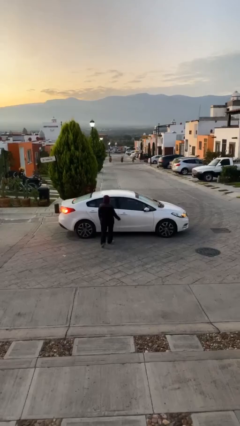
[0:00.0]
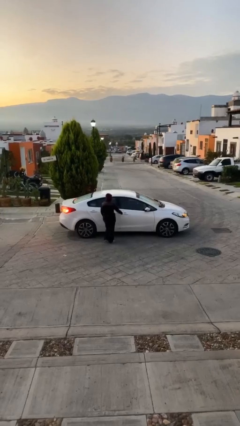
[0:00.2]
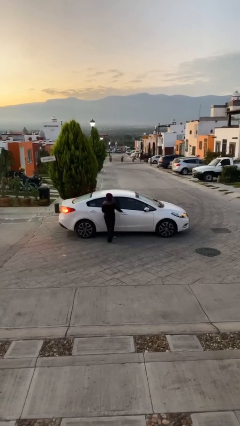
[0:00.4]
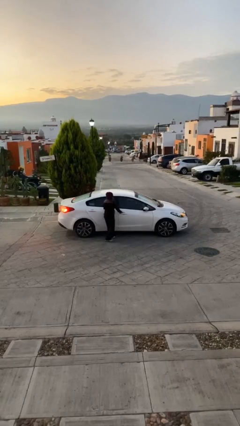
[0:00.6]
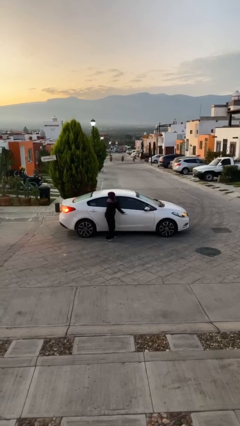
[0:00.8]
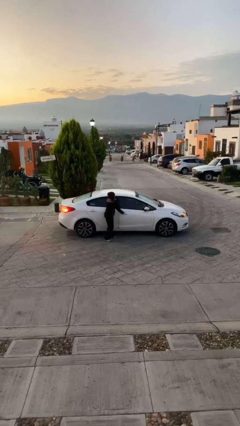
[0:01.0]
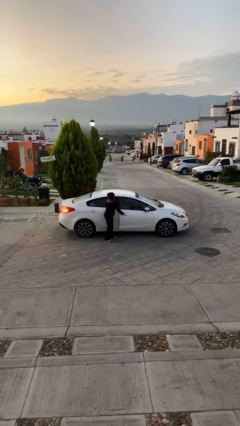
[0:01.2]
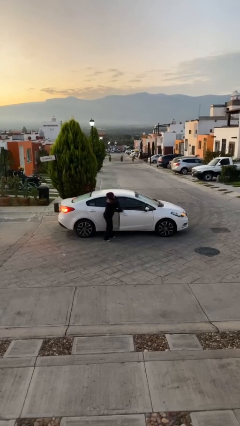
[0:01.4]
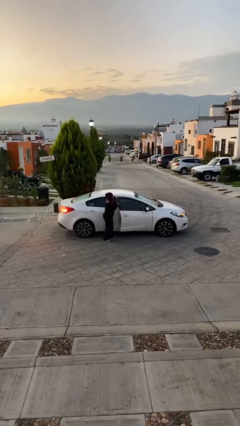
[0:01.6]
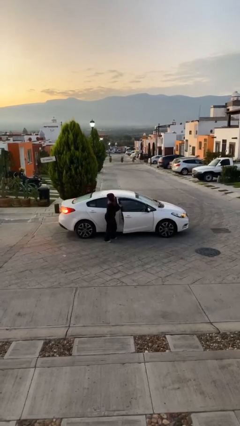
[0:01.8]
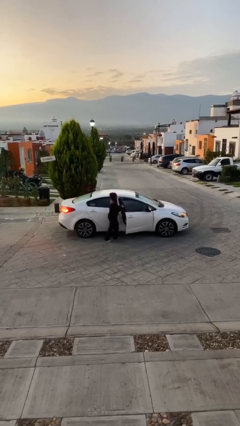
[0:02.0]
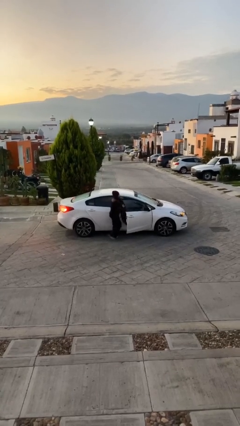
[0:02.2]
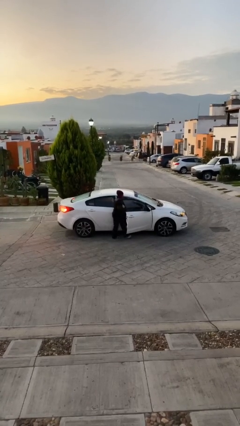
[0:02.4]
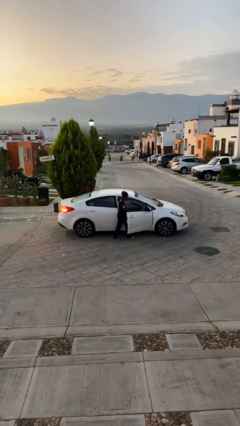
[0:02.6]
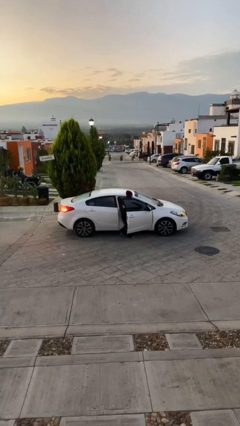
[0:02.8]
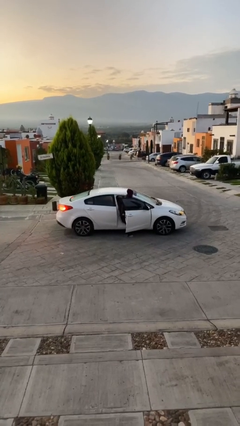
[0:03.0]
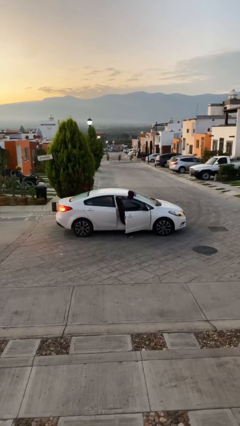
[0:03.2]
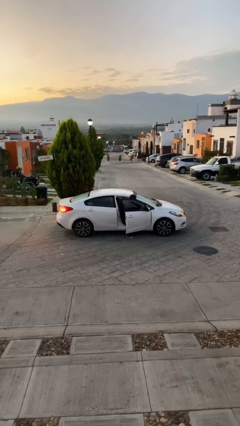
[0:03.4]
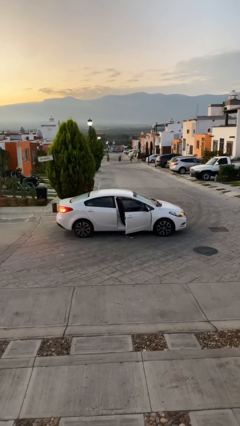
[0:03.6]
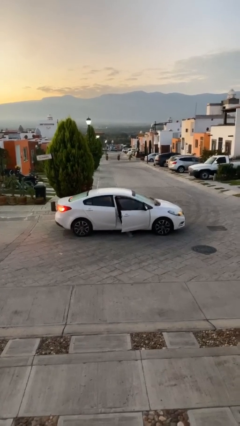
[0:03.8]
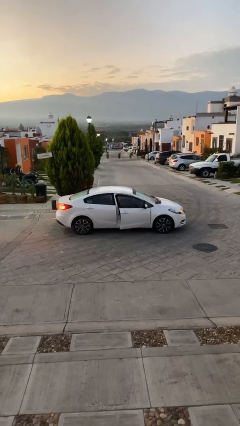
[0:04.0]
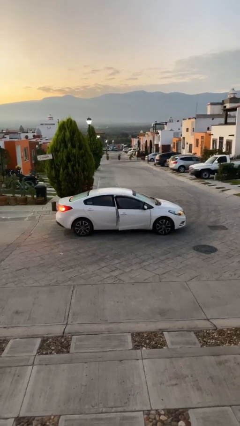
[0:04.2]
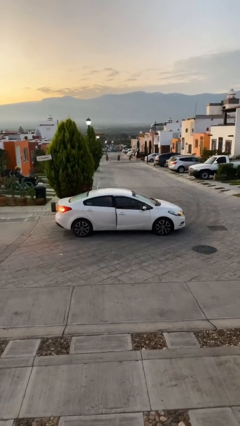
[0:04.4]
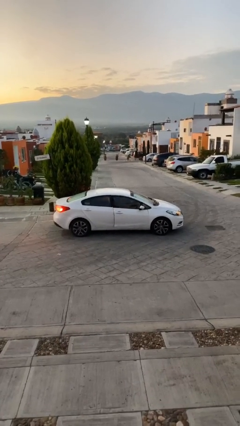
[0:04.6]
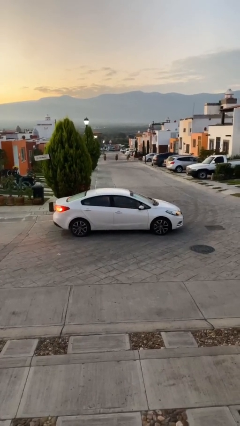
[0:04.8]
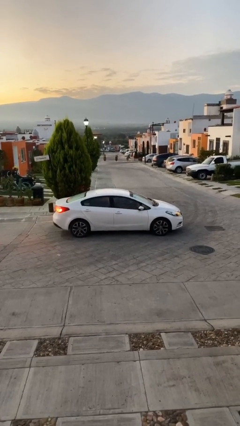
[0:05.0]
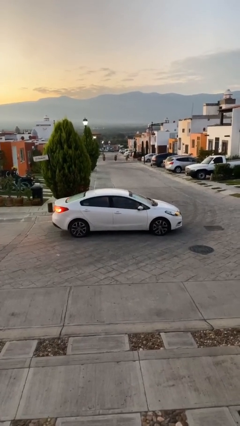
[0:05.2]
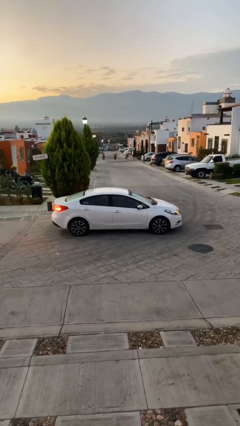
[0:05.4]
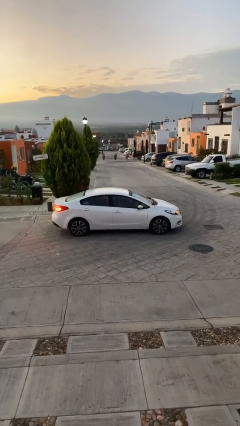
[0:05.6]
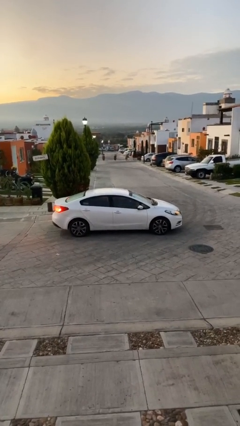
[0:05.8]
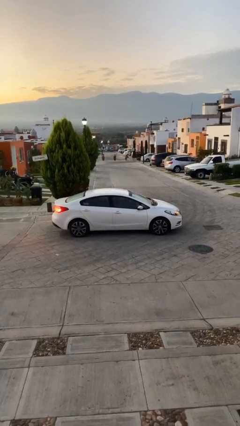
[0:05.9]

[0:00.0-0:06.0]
car picks up person

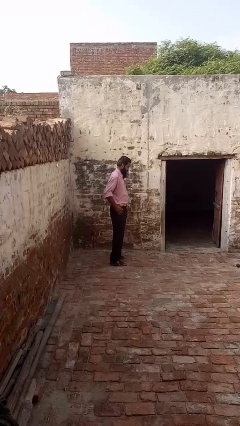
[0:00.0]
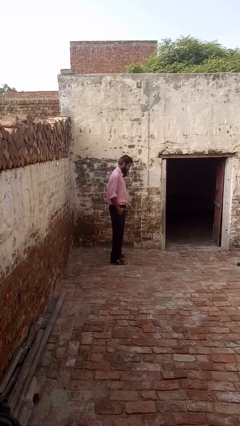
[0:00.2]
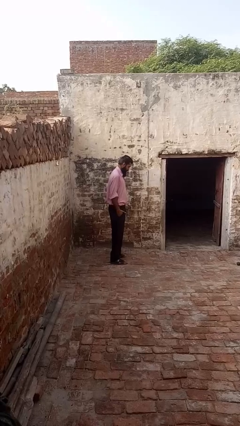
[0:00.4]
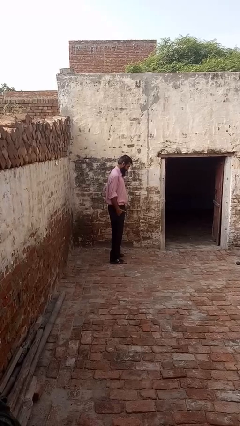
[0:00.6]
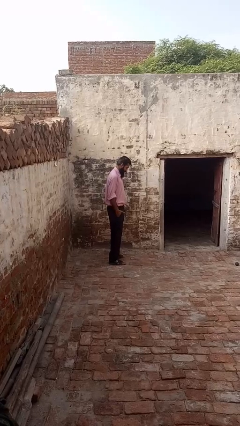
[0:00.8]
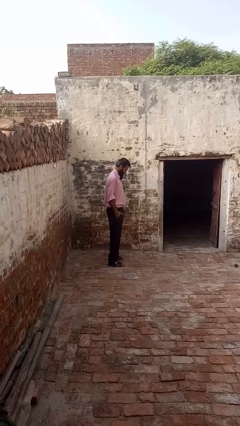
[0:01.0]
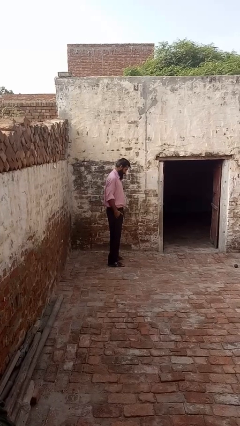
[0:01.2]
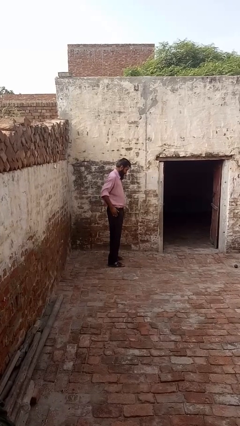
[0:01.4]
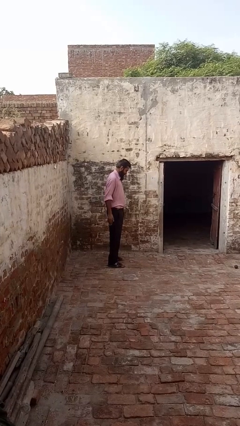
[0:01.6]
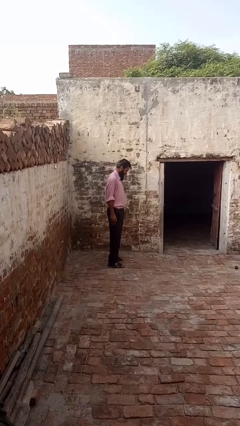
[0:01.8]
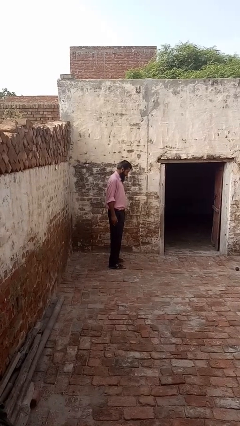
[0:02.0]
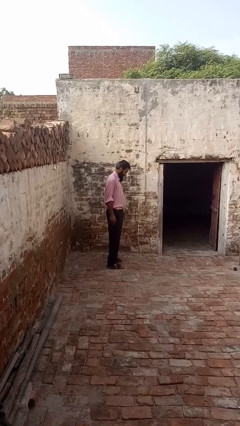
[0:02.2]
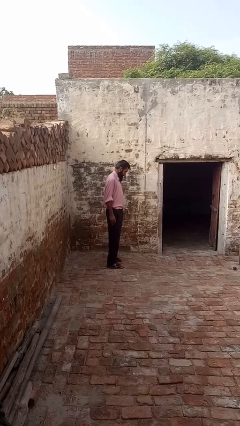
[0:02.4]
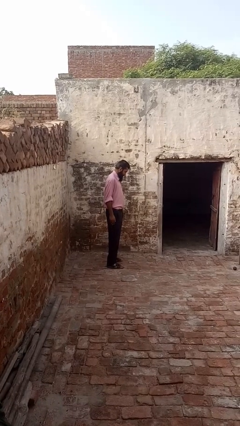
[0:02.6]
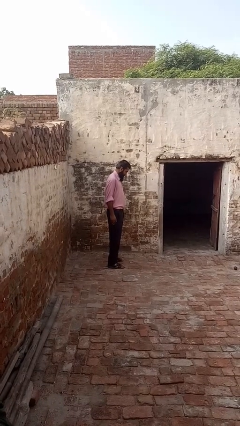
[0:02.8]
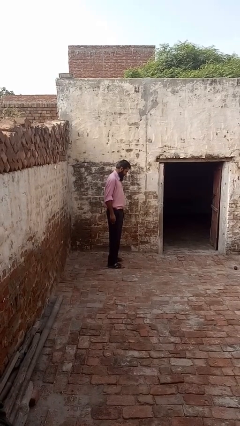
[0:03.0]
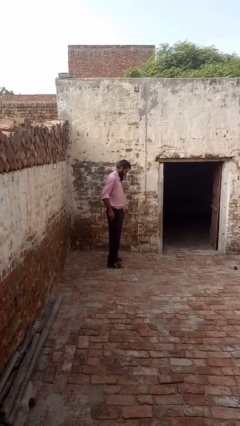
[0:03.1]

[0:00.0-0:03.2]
person puts hands in back pockets

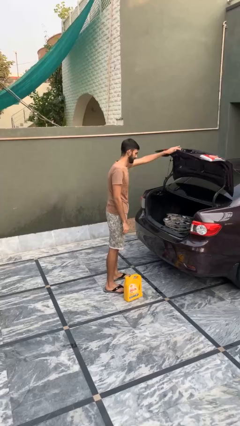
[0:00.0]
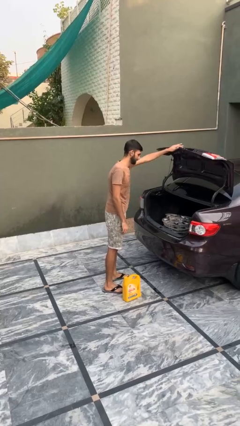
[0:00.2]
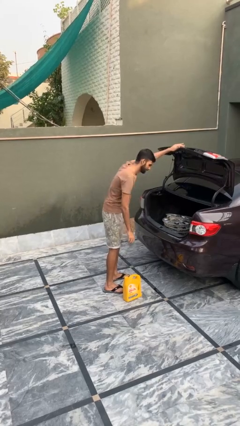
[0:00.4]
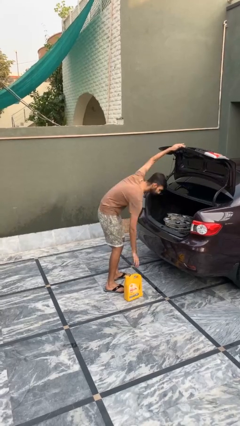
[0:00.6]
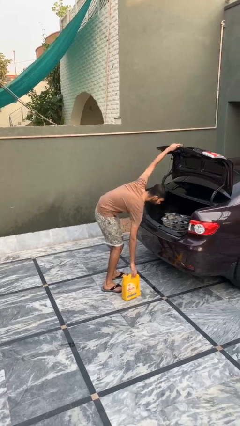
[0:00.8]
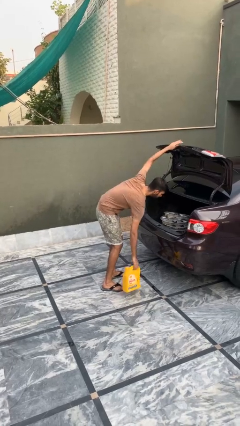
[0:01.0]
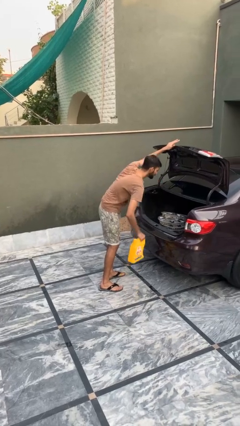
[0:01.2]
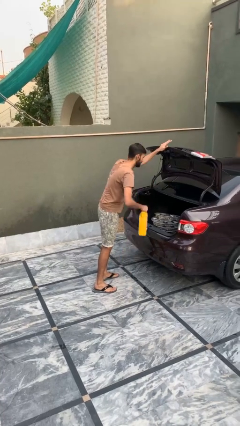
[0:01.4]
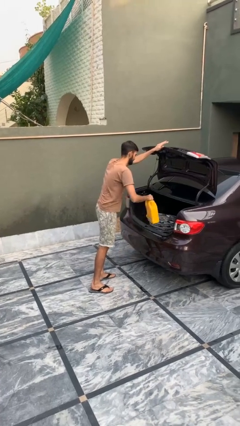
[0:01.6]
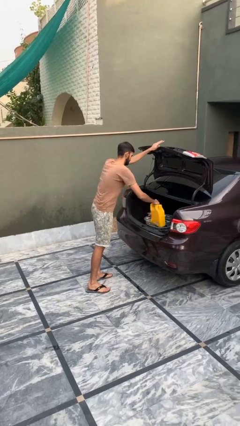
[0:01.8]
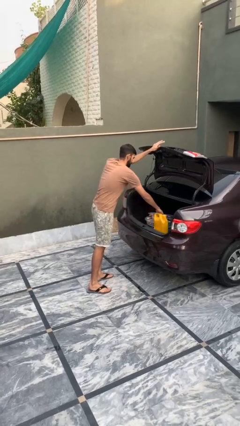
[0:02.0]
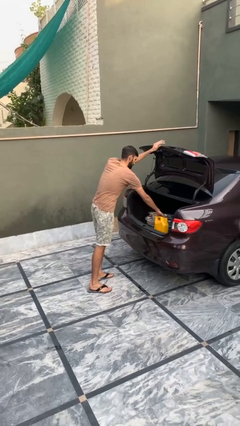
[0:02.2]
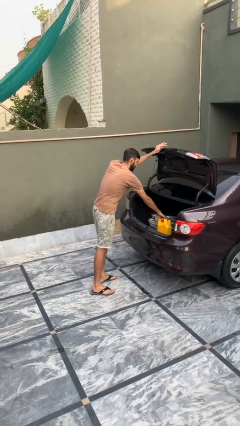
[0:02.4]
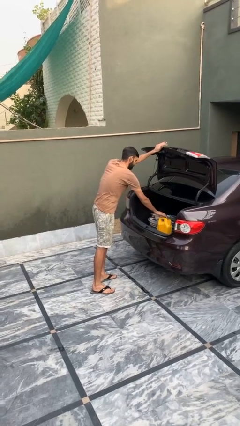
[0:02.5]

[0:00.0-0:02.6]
person loads car

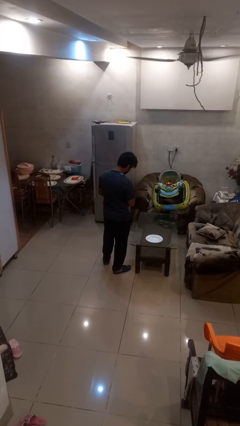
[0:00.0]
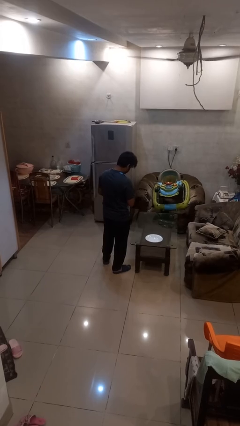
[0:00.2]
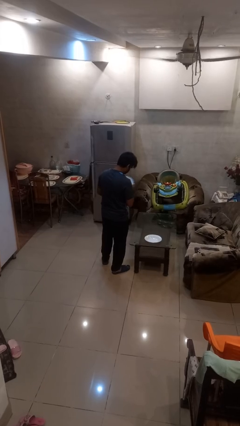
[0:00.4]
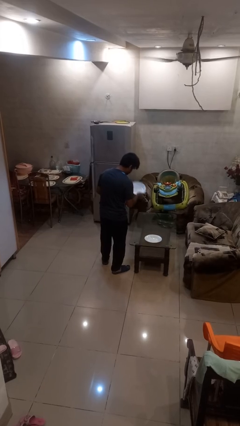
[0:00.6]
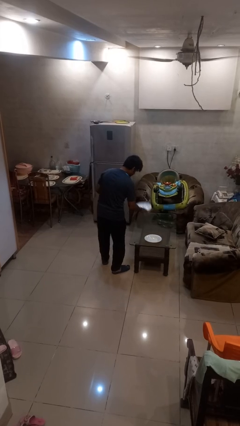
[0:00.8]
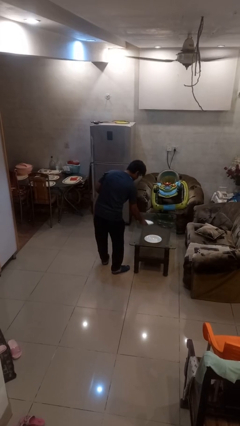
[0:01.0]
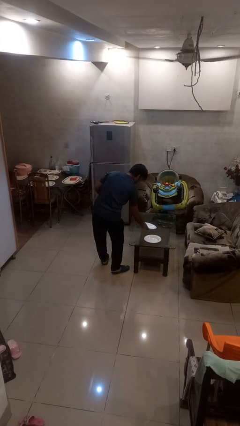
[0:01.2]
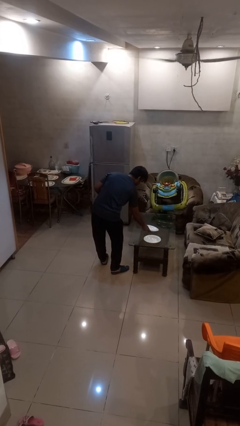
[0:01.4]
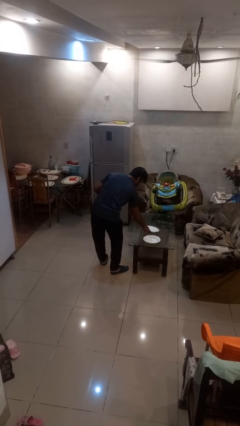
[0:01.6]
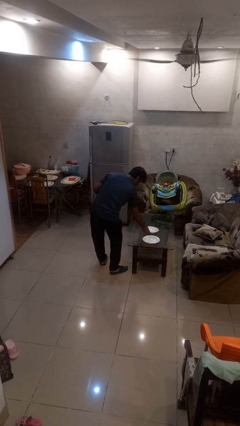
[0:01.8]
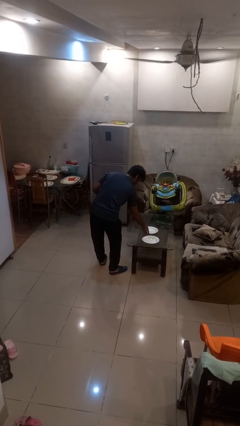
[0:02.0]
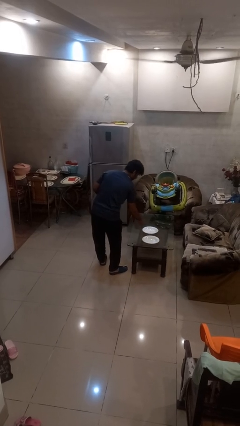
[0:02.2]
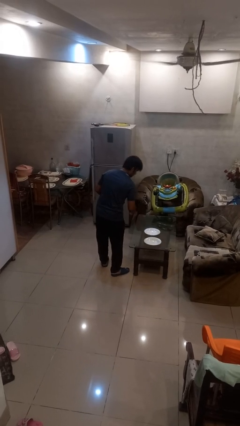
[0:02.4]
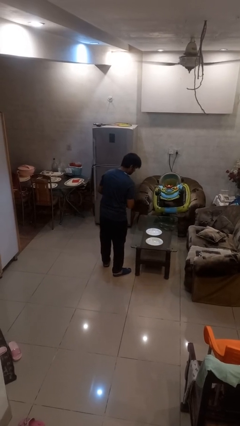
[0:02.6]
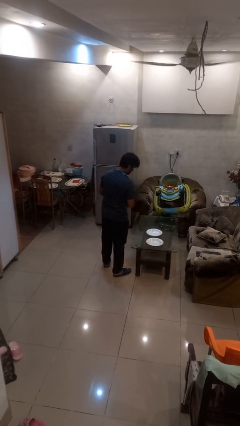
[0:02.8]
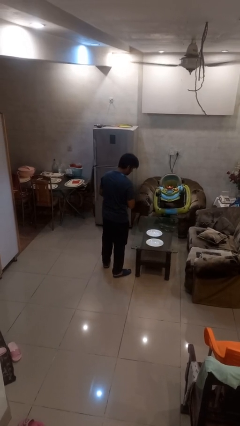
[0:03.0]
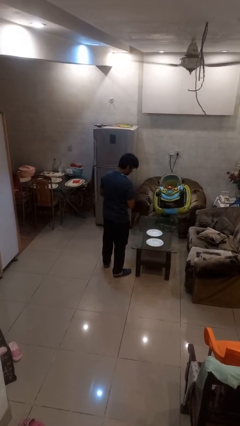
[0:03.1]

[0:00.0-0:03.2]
person sets table

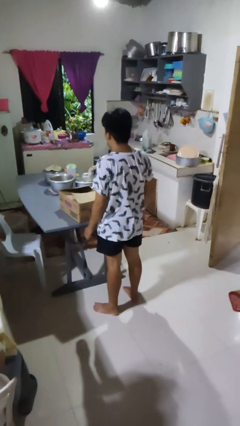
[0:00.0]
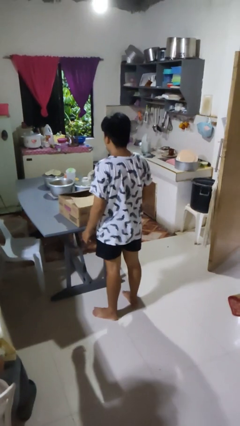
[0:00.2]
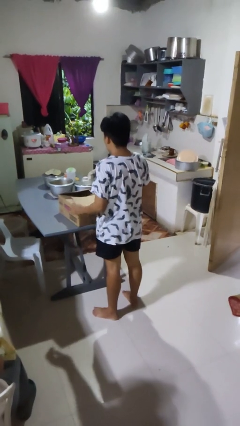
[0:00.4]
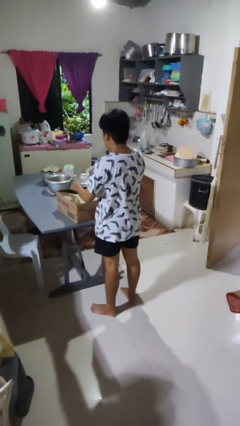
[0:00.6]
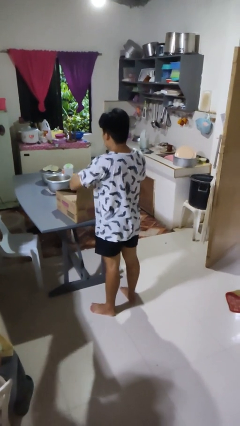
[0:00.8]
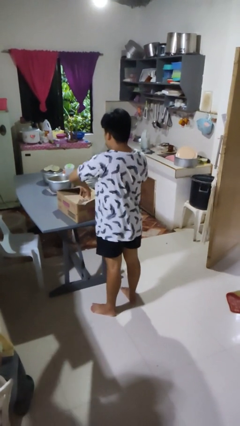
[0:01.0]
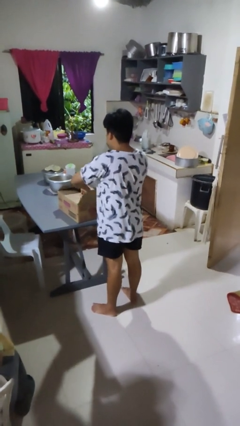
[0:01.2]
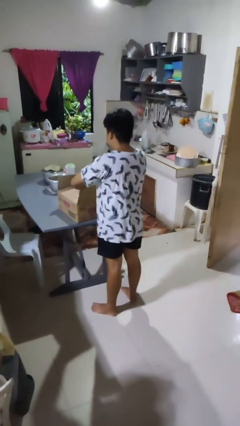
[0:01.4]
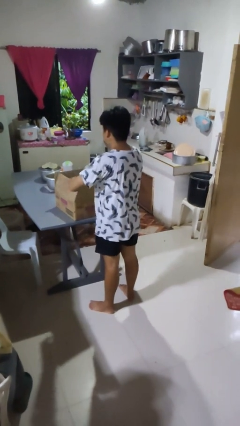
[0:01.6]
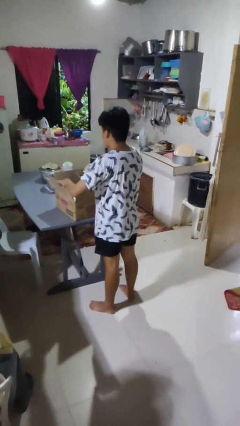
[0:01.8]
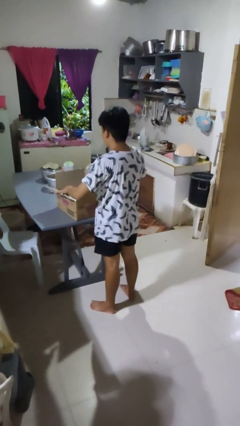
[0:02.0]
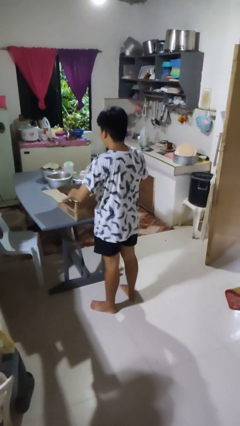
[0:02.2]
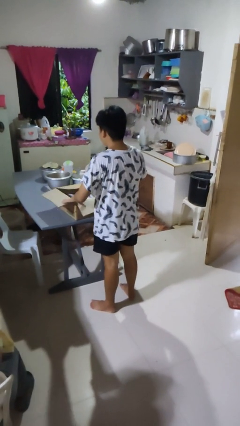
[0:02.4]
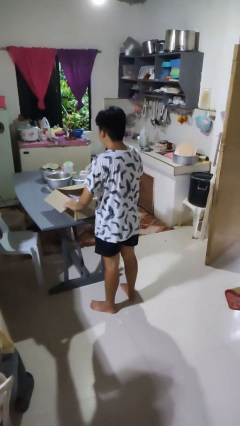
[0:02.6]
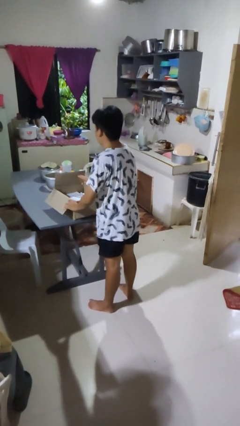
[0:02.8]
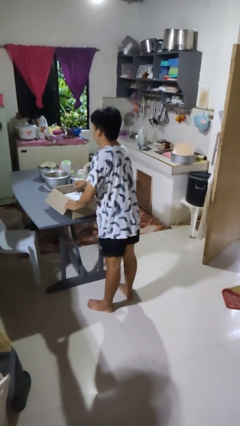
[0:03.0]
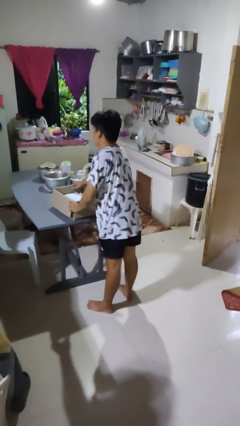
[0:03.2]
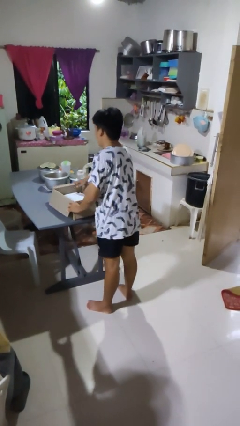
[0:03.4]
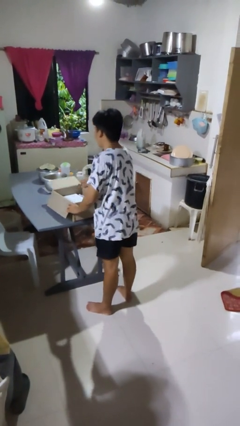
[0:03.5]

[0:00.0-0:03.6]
person opens box
